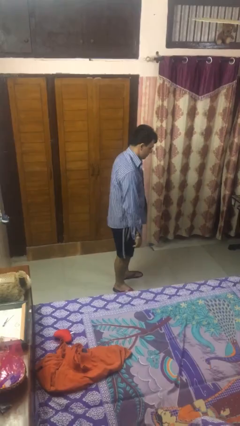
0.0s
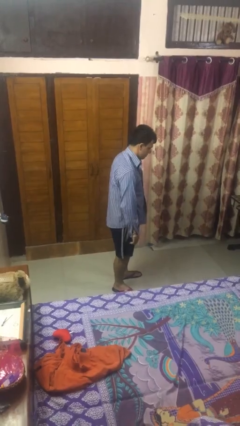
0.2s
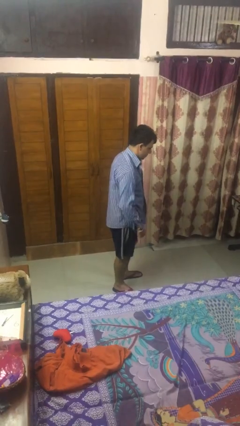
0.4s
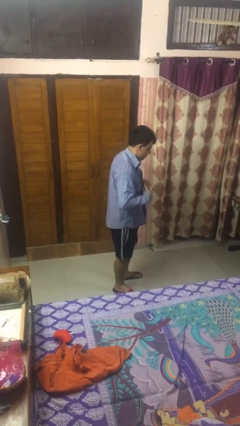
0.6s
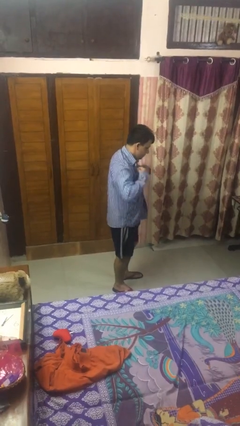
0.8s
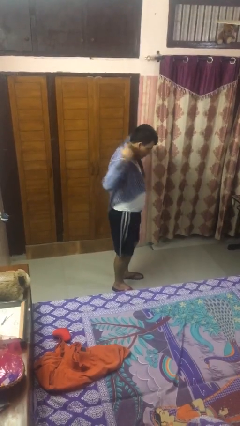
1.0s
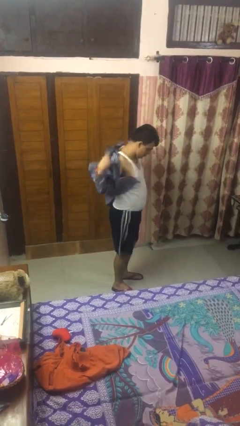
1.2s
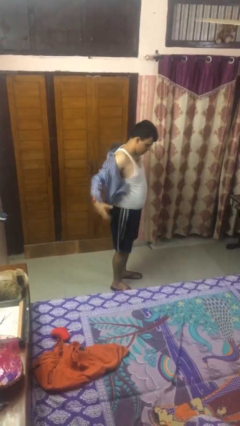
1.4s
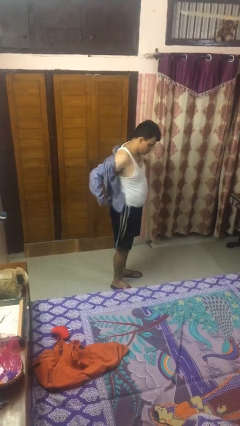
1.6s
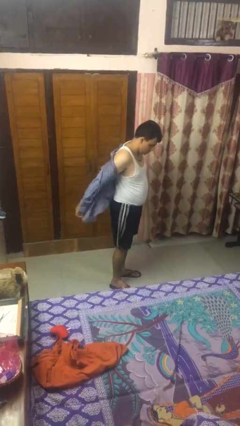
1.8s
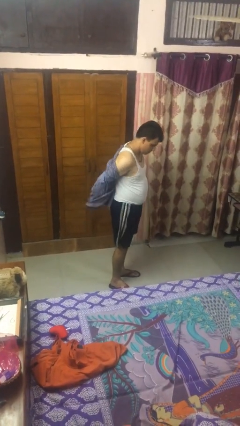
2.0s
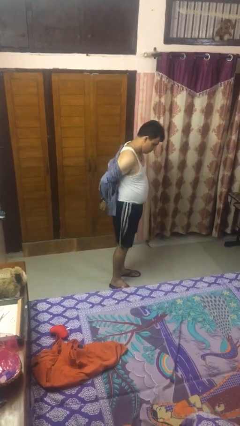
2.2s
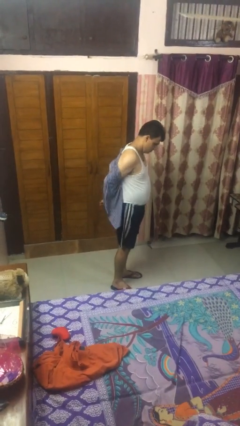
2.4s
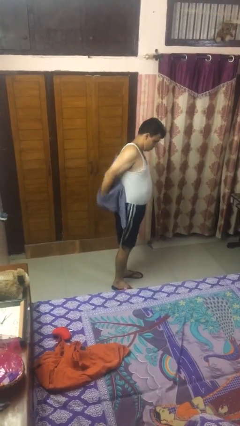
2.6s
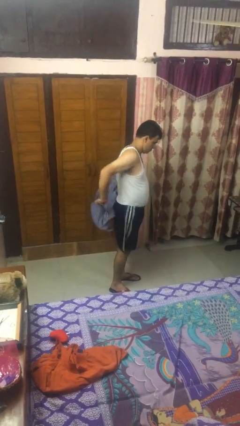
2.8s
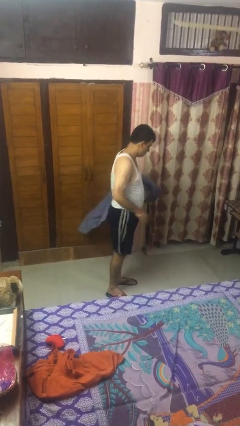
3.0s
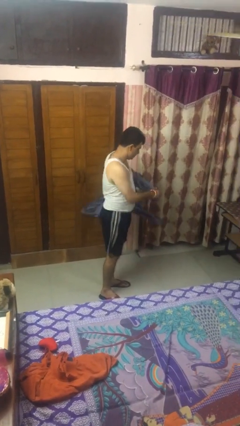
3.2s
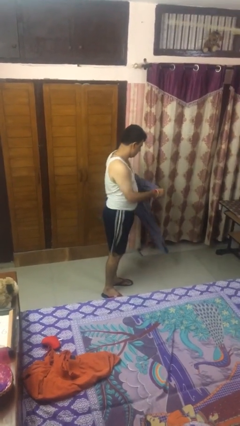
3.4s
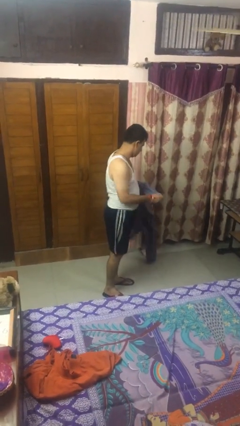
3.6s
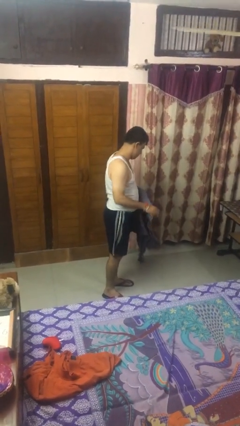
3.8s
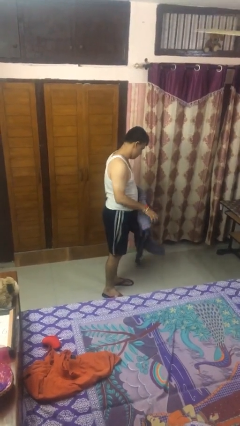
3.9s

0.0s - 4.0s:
person takes off shirt

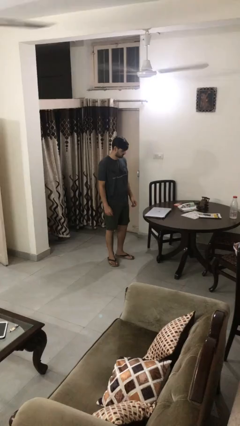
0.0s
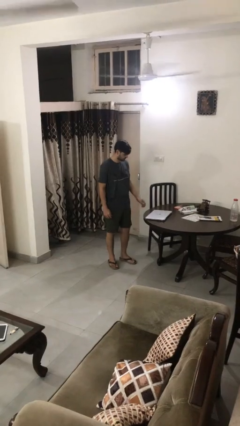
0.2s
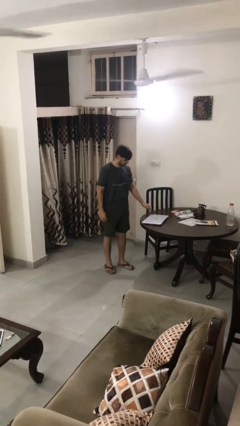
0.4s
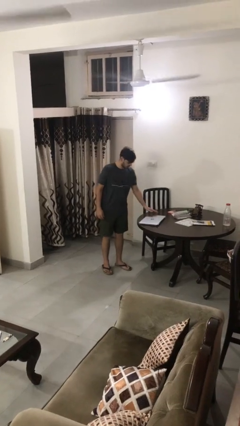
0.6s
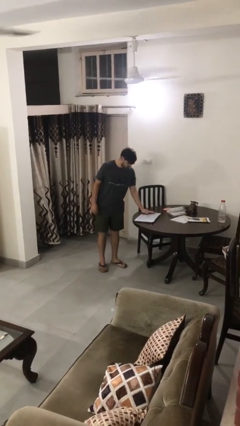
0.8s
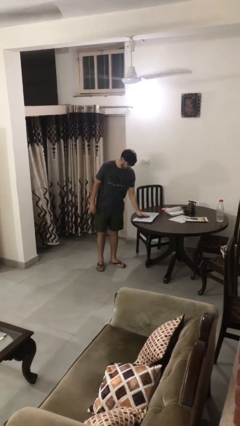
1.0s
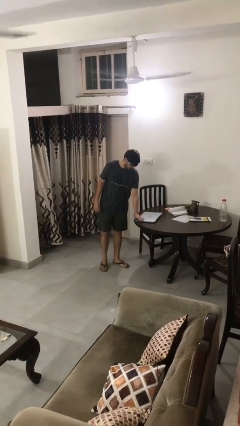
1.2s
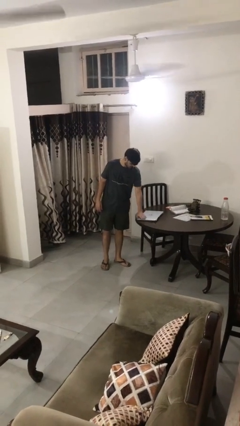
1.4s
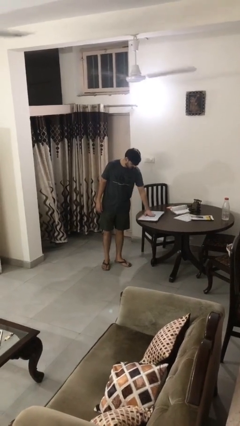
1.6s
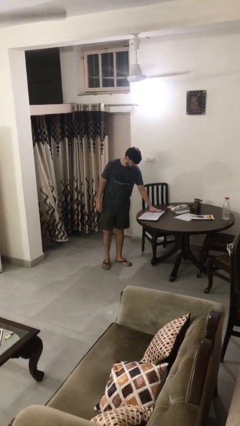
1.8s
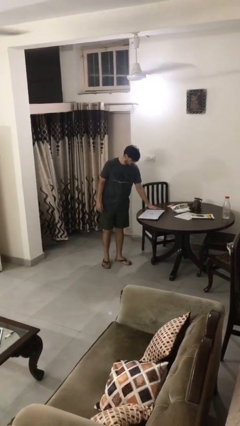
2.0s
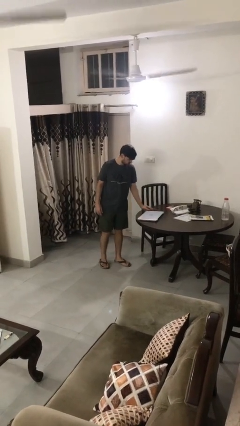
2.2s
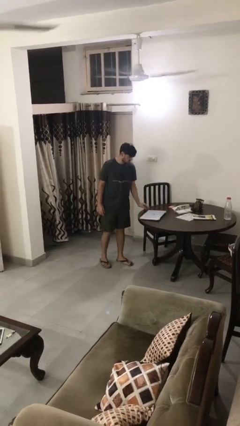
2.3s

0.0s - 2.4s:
person waves hand over object

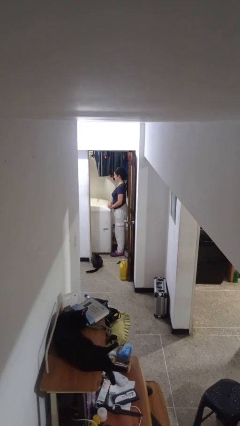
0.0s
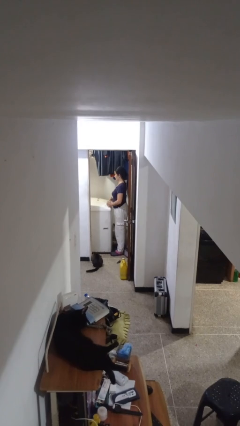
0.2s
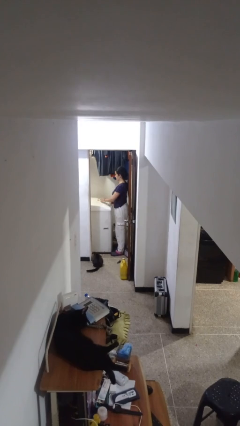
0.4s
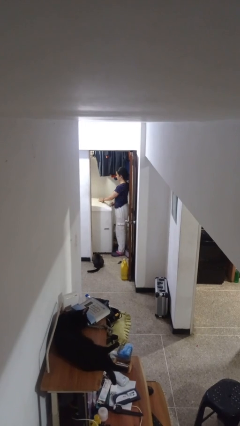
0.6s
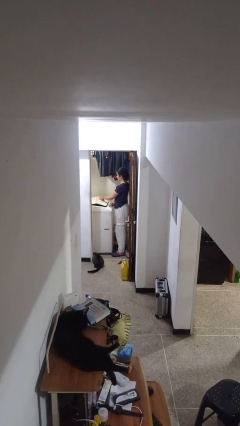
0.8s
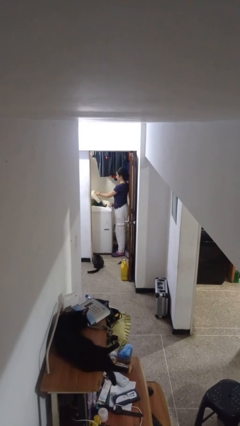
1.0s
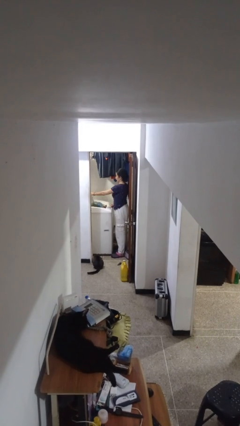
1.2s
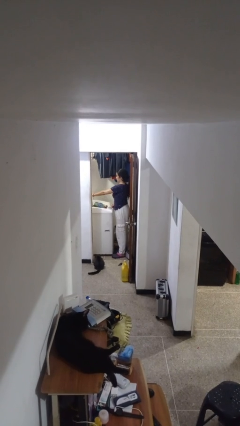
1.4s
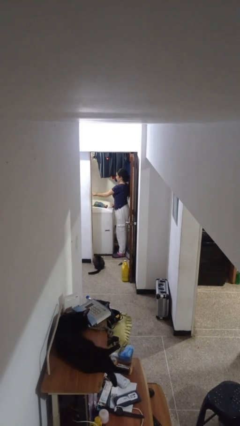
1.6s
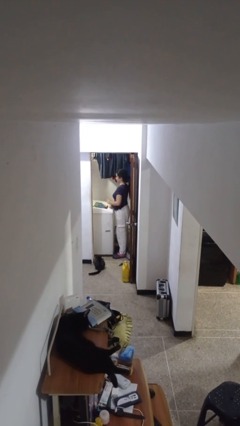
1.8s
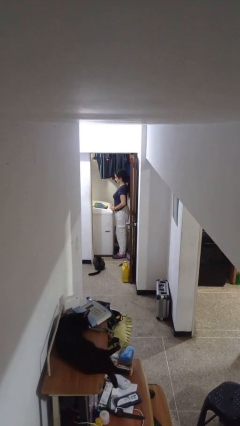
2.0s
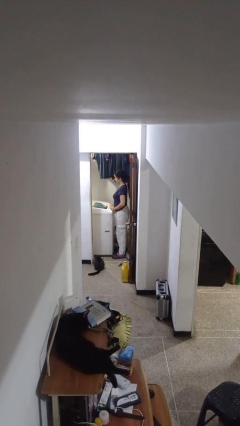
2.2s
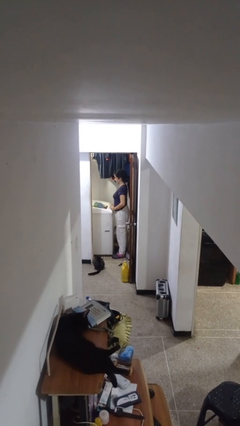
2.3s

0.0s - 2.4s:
person opens clothes washer

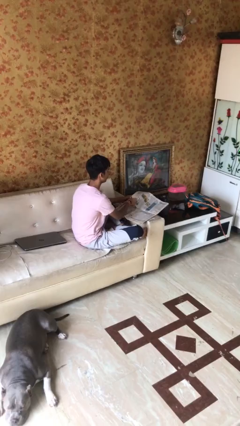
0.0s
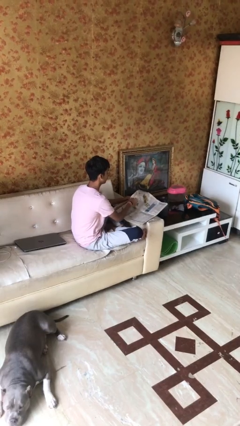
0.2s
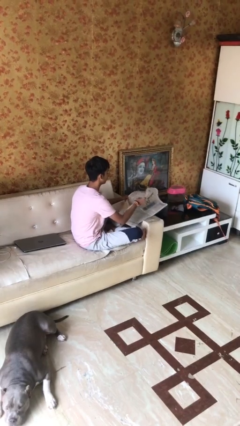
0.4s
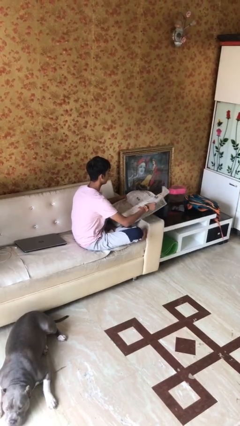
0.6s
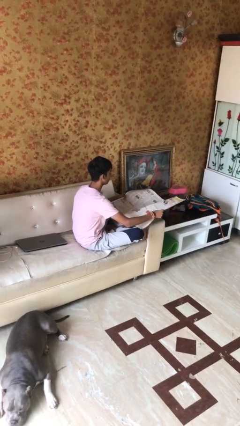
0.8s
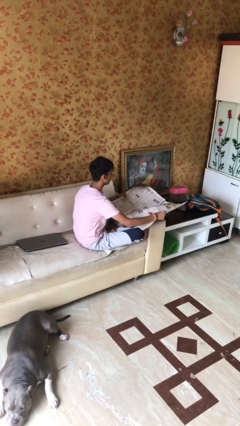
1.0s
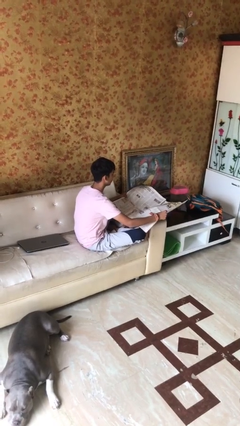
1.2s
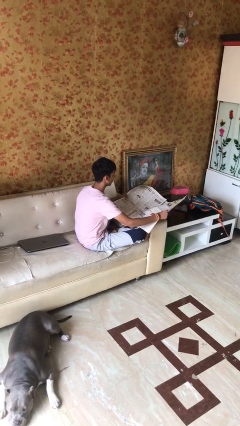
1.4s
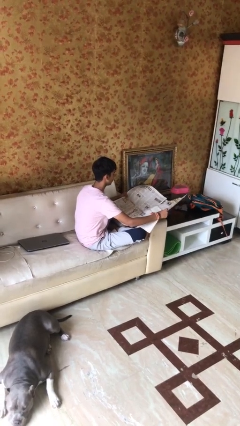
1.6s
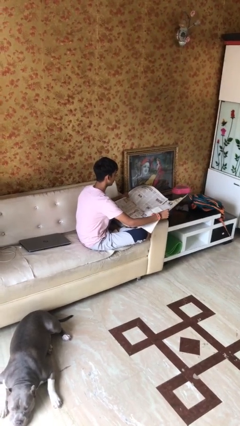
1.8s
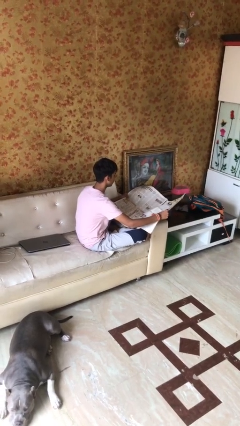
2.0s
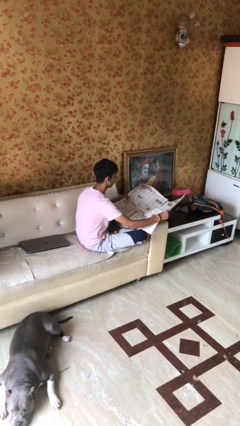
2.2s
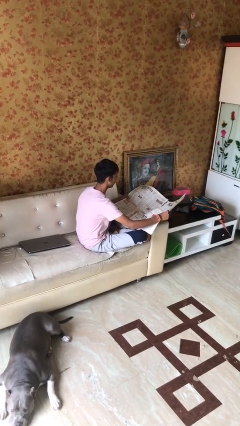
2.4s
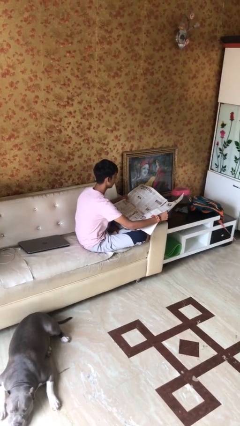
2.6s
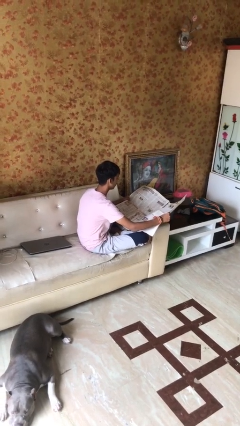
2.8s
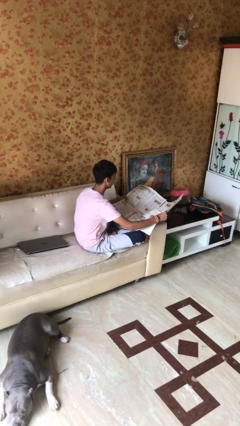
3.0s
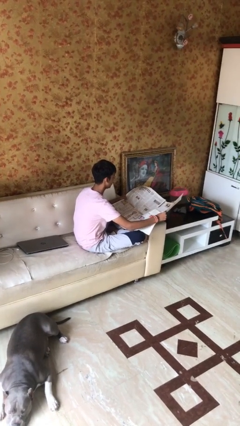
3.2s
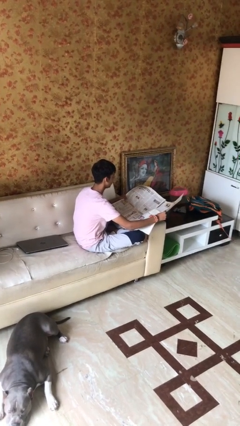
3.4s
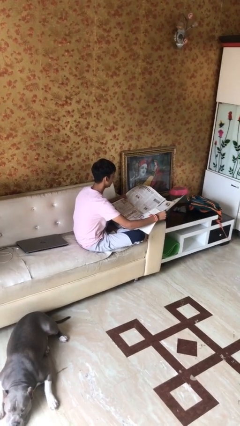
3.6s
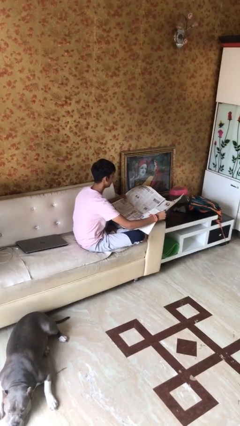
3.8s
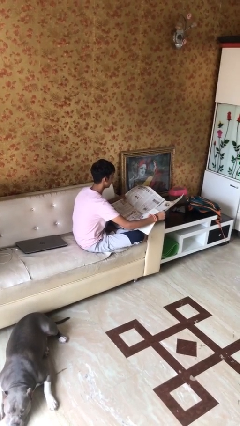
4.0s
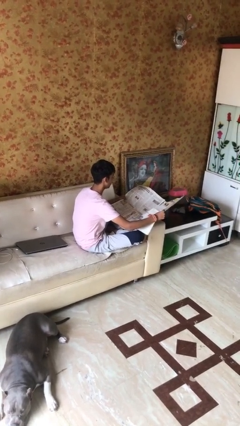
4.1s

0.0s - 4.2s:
person reads newspaper

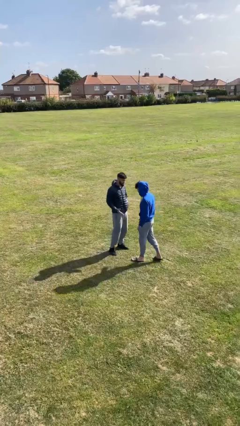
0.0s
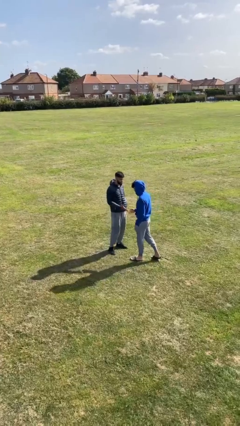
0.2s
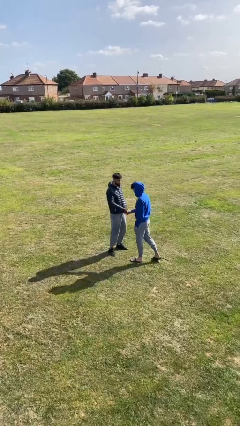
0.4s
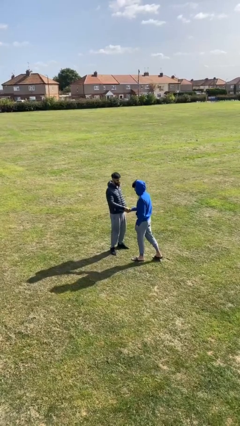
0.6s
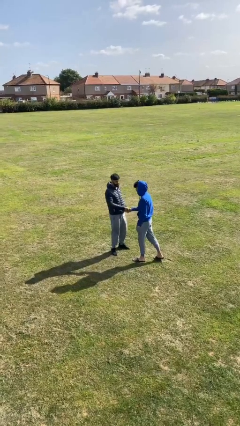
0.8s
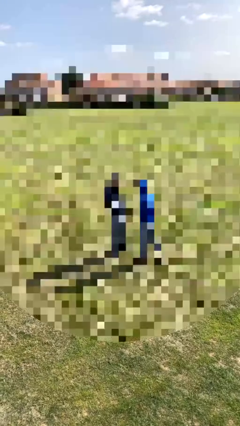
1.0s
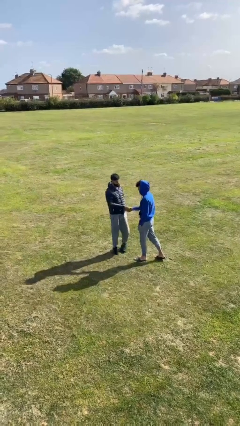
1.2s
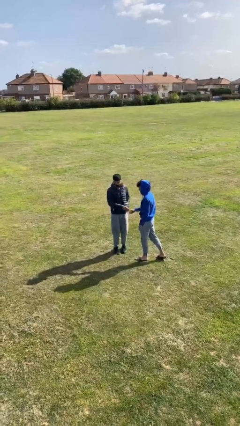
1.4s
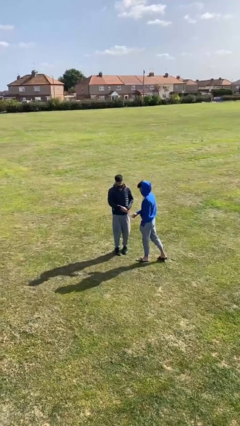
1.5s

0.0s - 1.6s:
person shakes hand

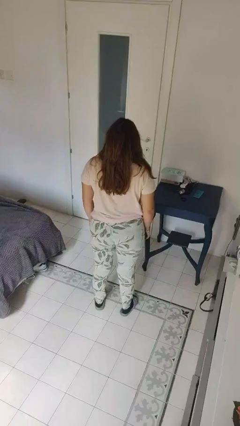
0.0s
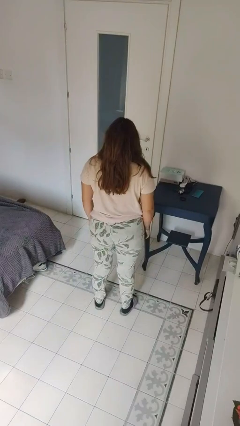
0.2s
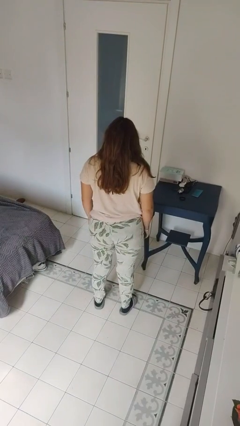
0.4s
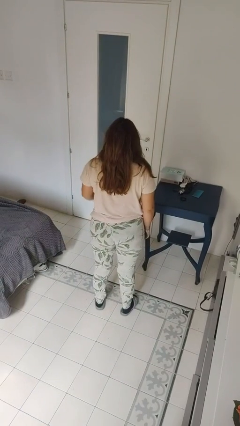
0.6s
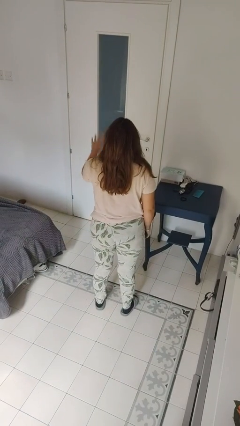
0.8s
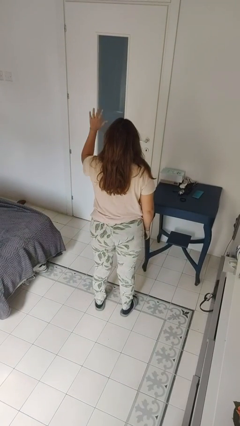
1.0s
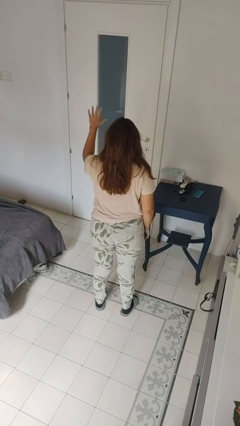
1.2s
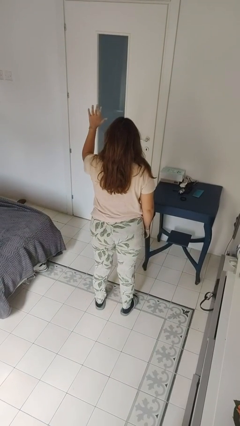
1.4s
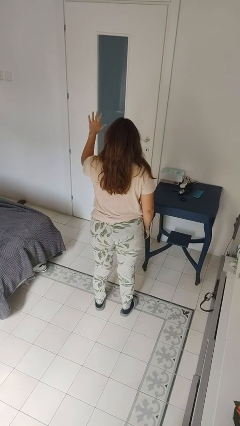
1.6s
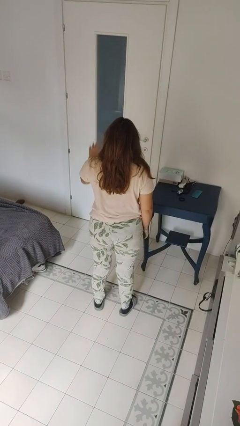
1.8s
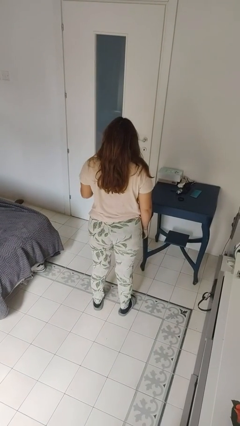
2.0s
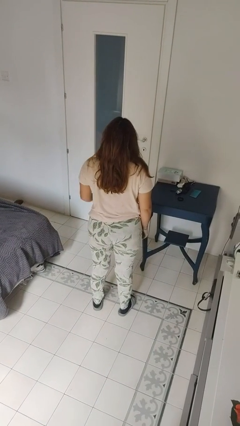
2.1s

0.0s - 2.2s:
person gestures number five

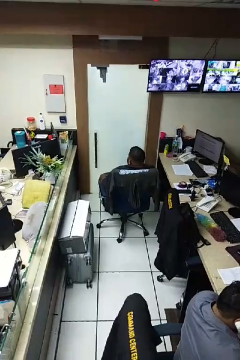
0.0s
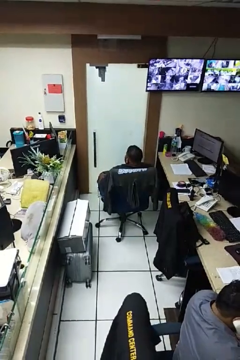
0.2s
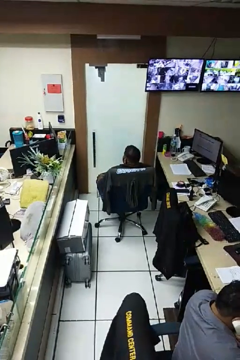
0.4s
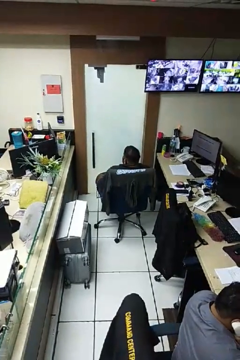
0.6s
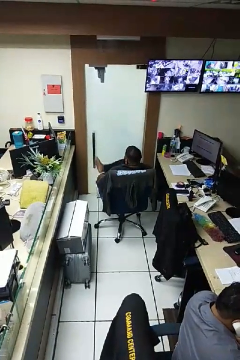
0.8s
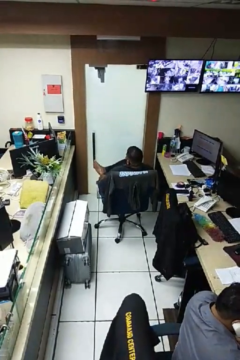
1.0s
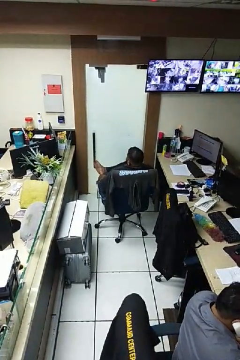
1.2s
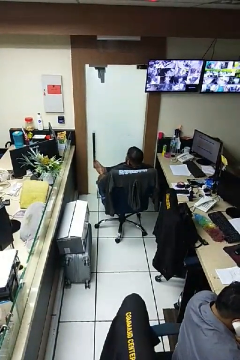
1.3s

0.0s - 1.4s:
person crosses legs
